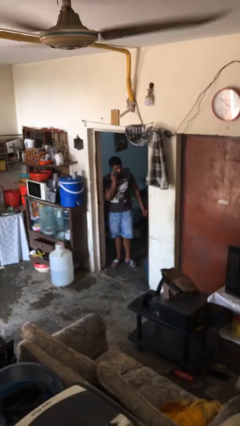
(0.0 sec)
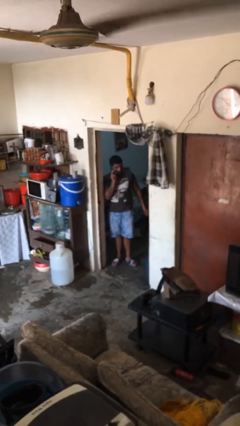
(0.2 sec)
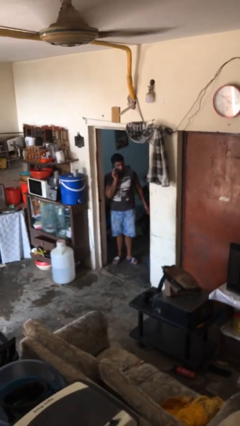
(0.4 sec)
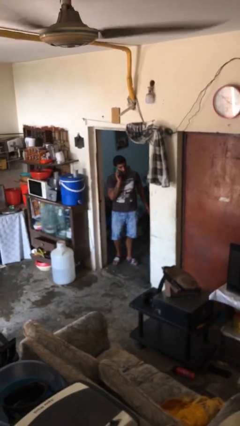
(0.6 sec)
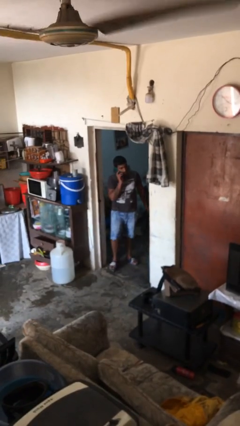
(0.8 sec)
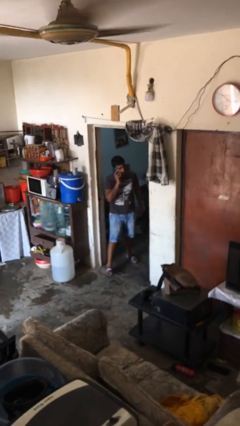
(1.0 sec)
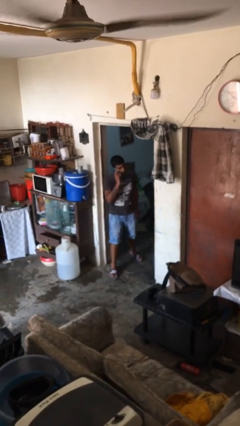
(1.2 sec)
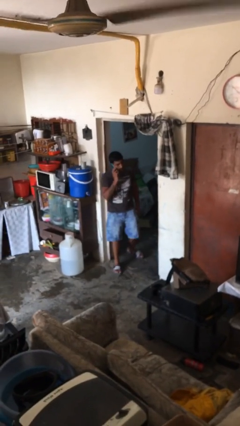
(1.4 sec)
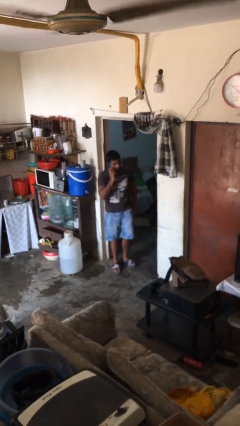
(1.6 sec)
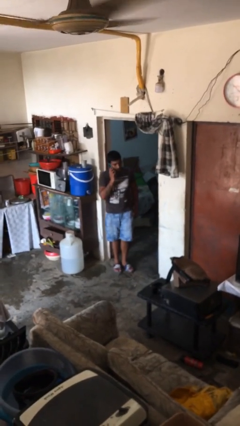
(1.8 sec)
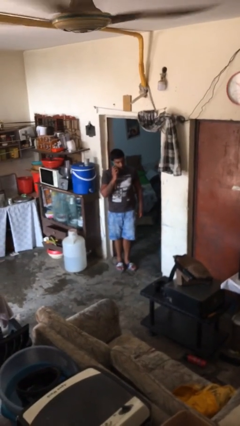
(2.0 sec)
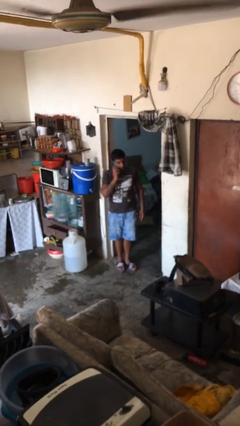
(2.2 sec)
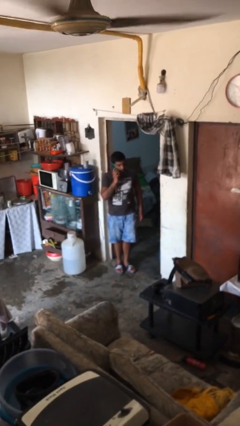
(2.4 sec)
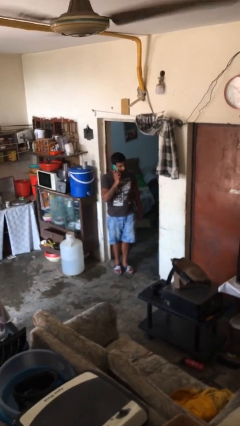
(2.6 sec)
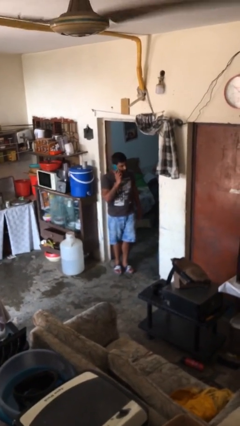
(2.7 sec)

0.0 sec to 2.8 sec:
person enters scene through structure

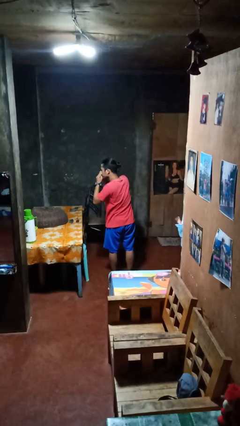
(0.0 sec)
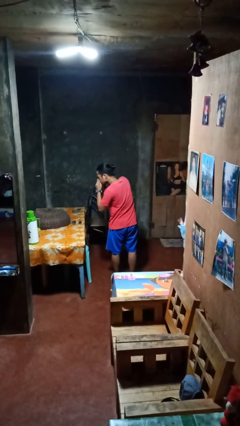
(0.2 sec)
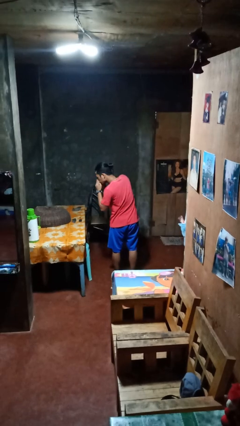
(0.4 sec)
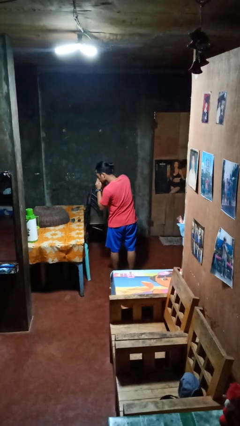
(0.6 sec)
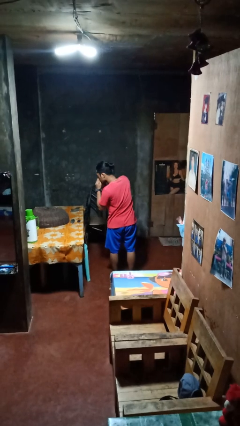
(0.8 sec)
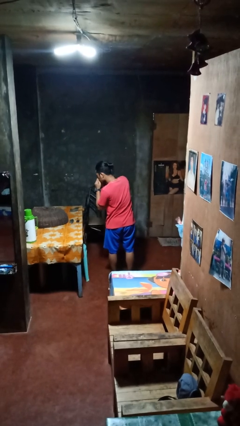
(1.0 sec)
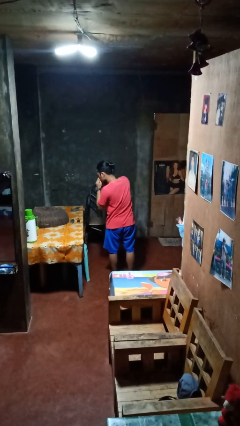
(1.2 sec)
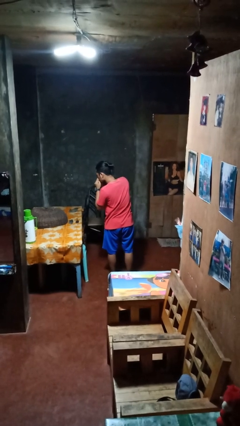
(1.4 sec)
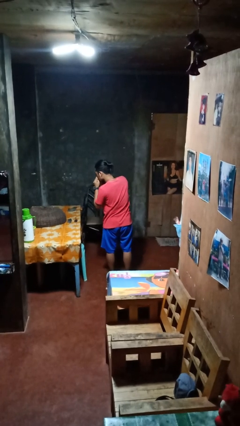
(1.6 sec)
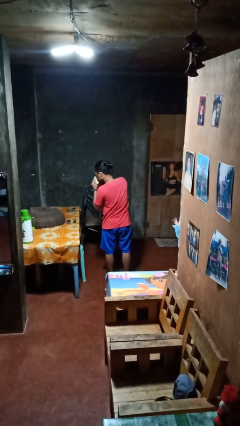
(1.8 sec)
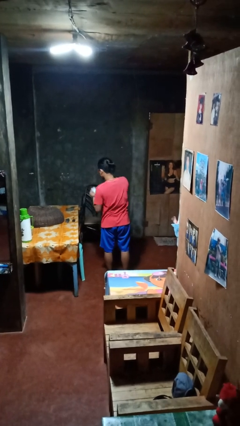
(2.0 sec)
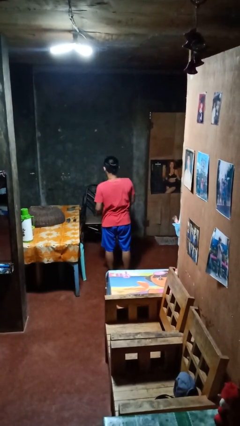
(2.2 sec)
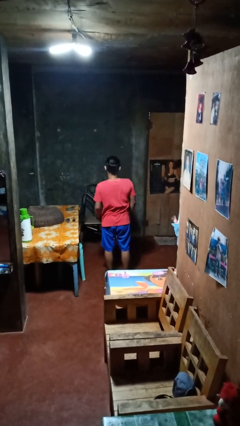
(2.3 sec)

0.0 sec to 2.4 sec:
person blows nose

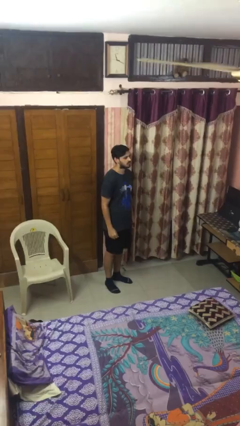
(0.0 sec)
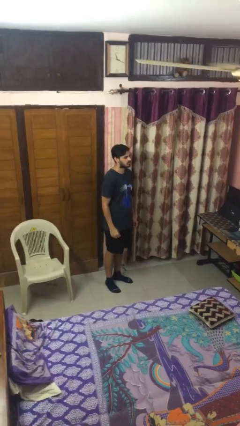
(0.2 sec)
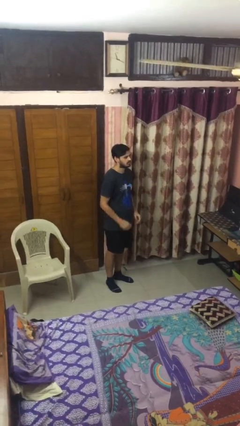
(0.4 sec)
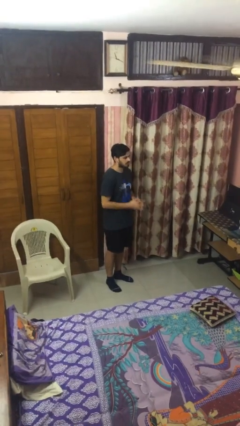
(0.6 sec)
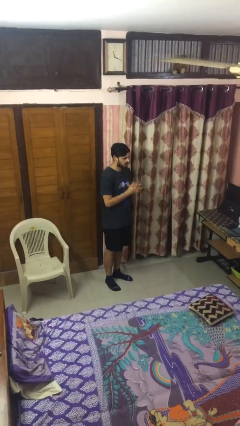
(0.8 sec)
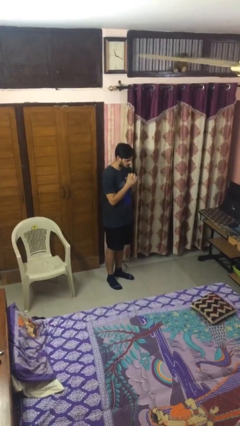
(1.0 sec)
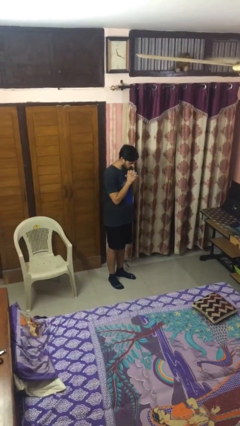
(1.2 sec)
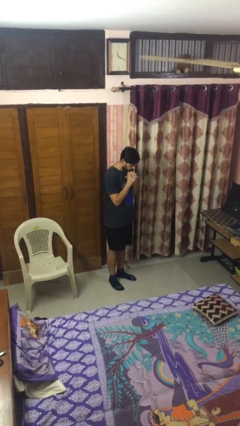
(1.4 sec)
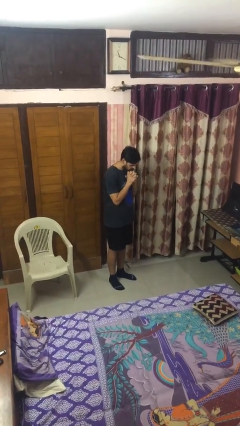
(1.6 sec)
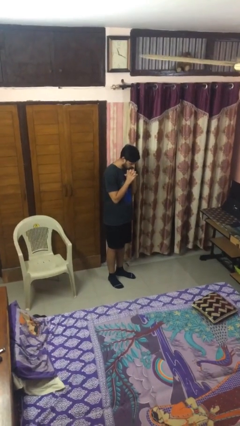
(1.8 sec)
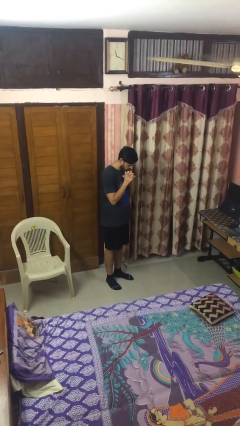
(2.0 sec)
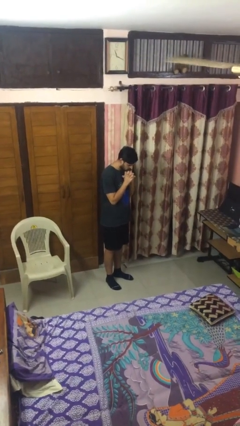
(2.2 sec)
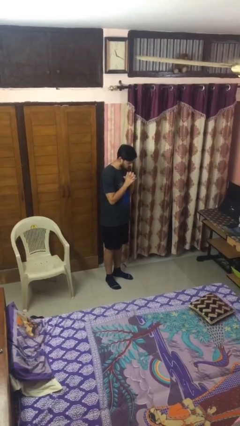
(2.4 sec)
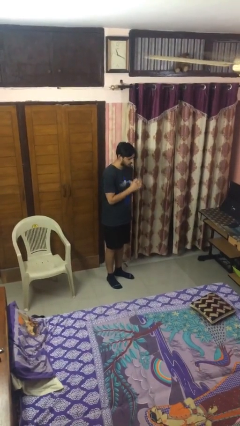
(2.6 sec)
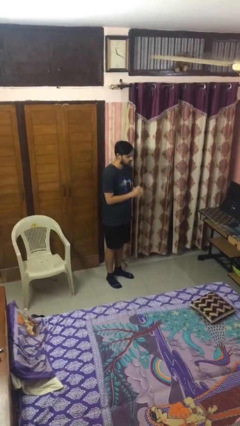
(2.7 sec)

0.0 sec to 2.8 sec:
person prays

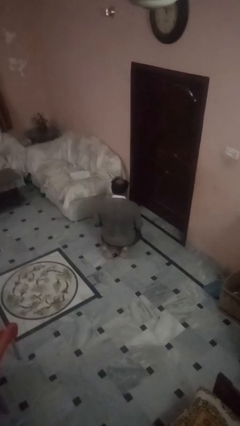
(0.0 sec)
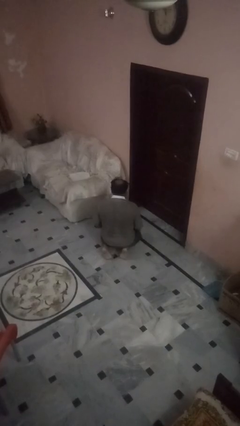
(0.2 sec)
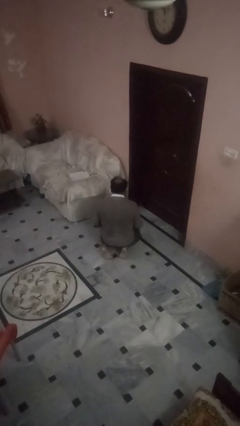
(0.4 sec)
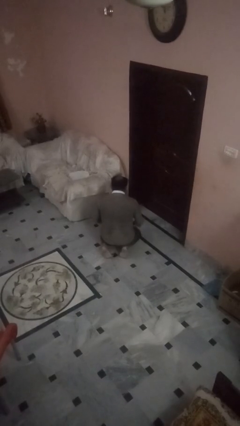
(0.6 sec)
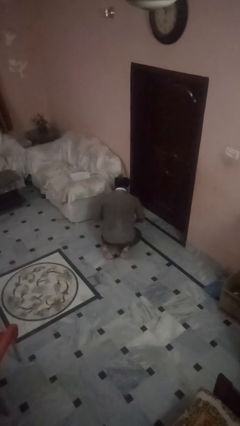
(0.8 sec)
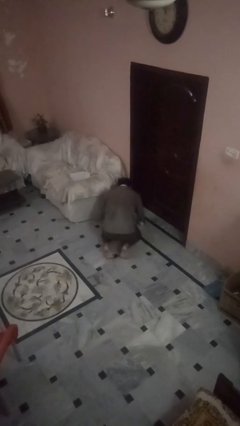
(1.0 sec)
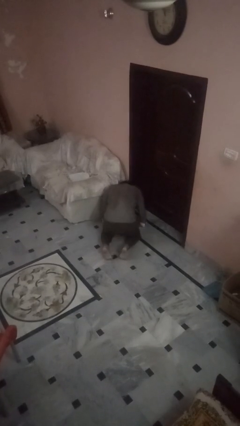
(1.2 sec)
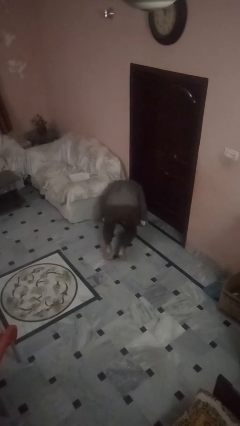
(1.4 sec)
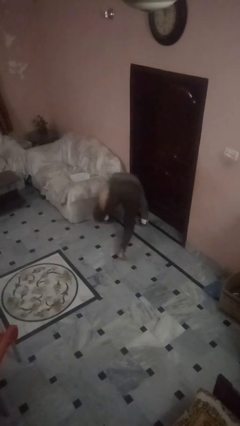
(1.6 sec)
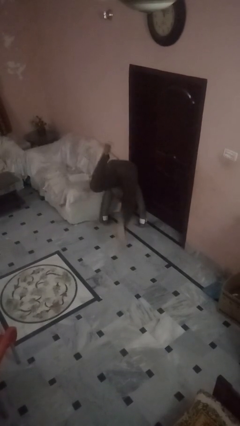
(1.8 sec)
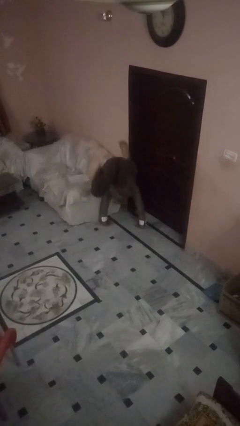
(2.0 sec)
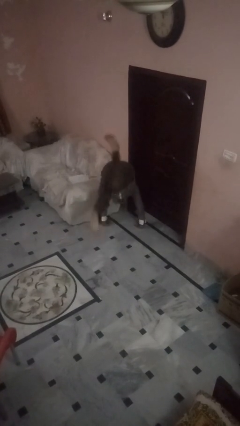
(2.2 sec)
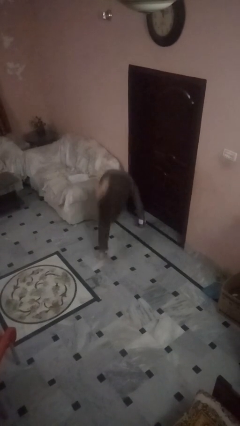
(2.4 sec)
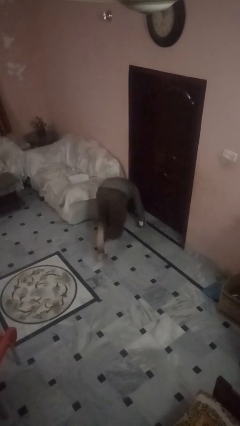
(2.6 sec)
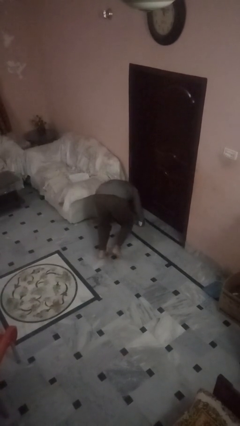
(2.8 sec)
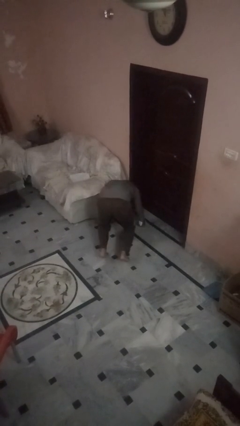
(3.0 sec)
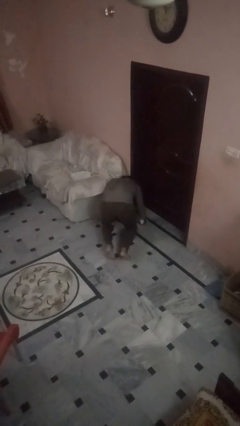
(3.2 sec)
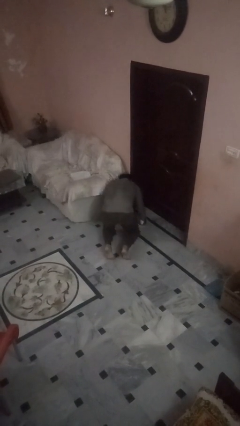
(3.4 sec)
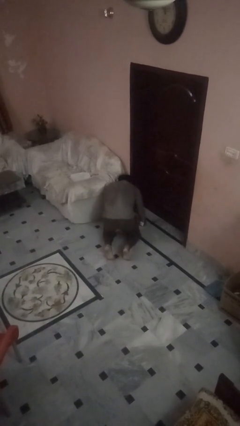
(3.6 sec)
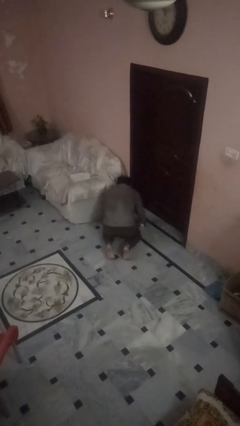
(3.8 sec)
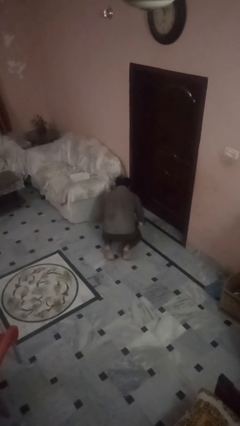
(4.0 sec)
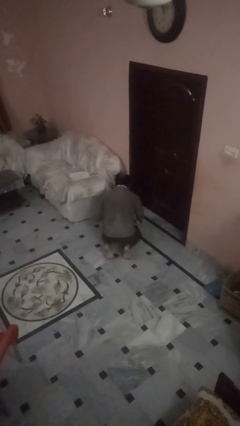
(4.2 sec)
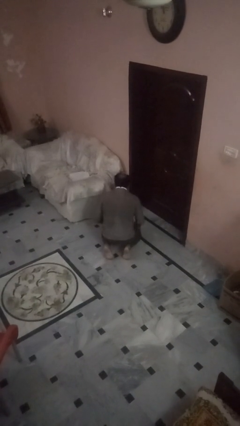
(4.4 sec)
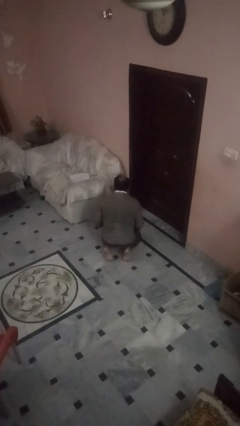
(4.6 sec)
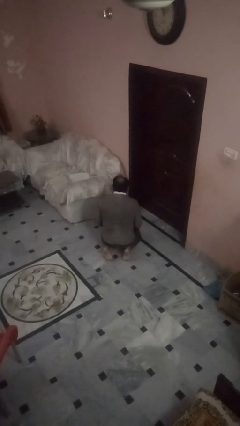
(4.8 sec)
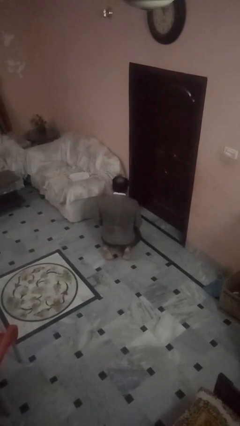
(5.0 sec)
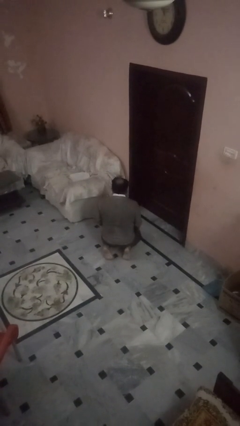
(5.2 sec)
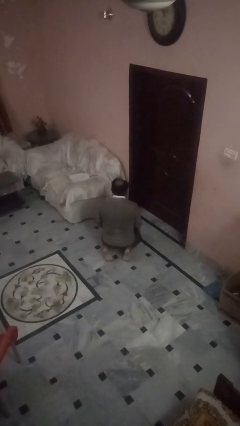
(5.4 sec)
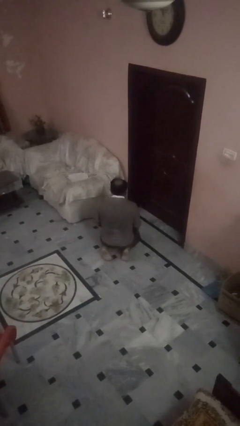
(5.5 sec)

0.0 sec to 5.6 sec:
person somersaults

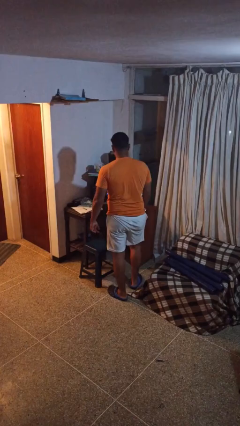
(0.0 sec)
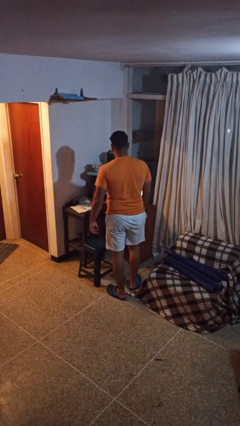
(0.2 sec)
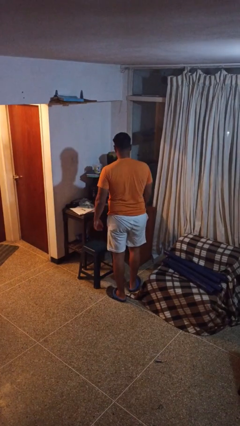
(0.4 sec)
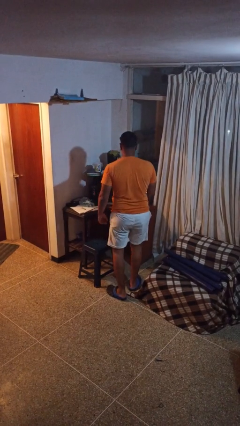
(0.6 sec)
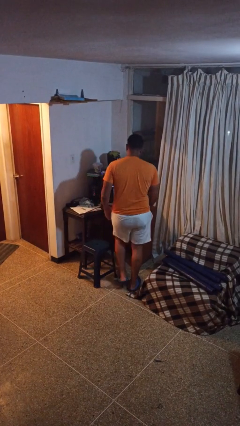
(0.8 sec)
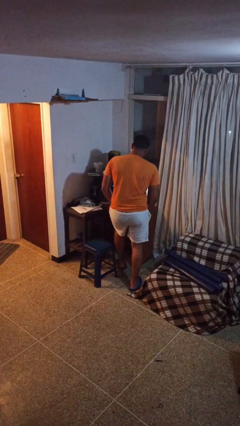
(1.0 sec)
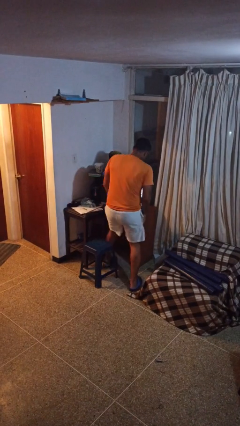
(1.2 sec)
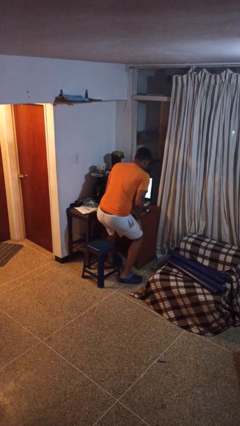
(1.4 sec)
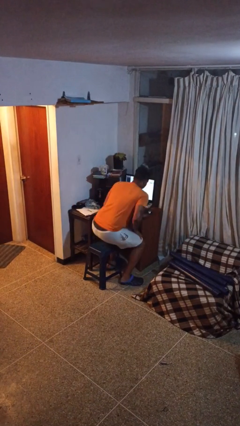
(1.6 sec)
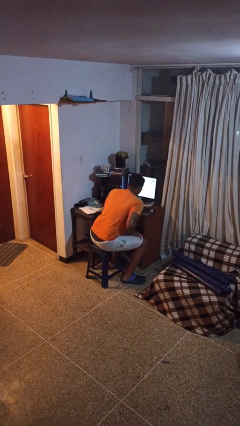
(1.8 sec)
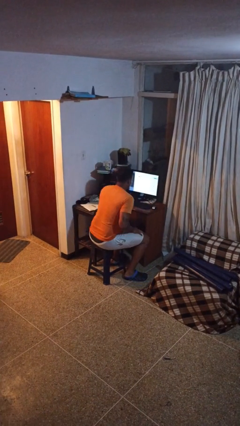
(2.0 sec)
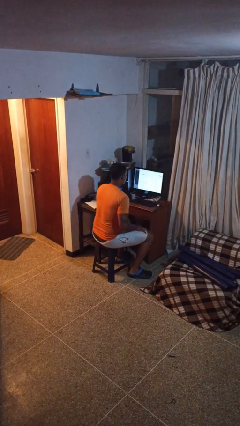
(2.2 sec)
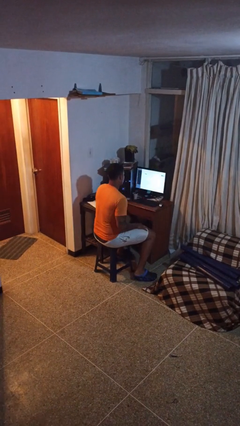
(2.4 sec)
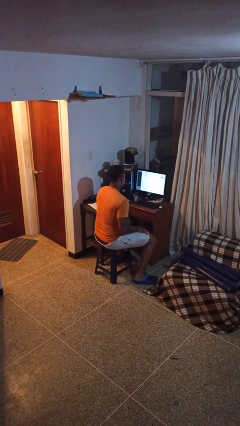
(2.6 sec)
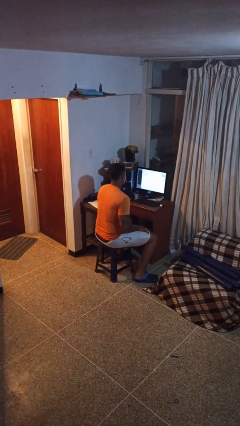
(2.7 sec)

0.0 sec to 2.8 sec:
person sits down

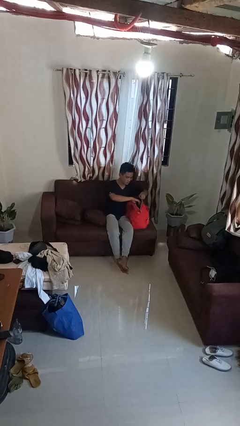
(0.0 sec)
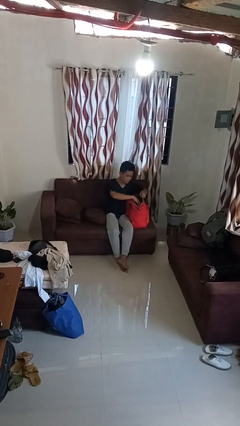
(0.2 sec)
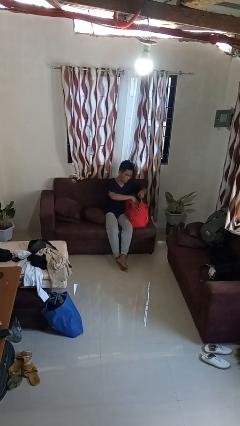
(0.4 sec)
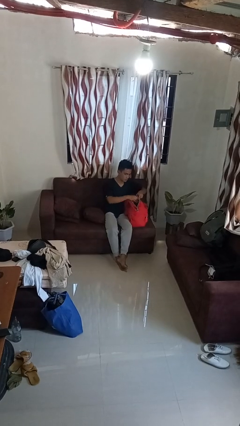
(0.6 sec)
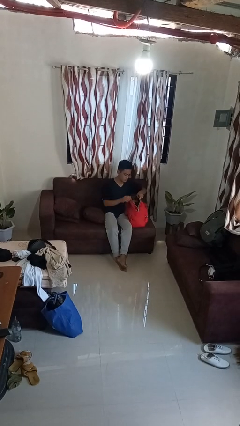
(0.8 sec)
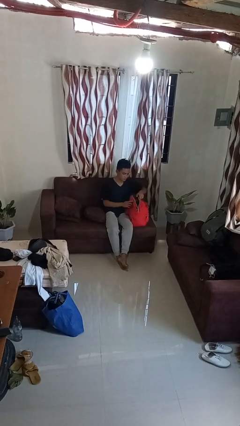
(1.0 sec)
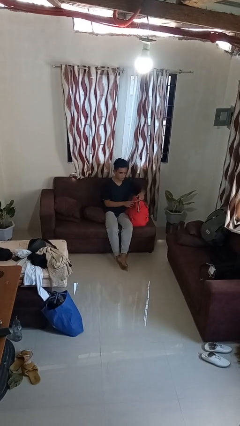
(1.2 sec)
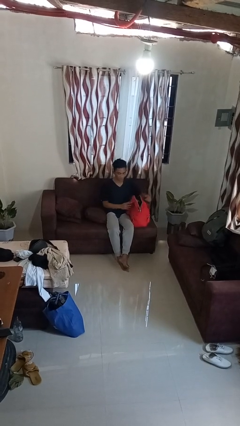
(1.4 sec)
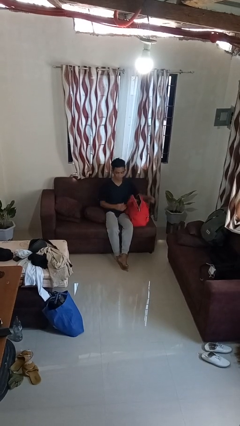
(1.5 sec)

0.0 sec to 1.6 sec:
person puts object into backpack
